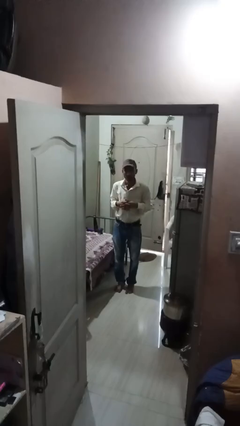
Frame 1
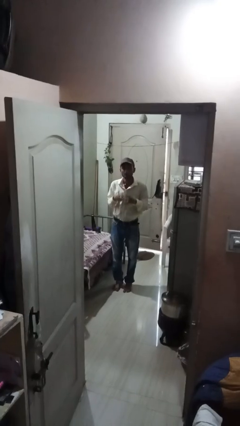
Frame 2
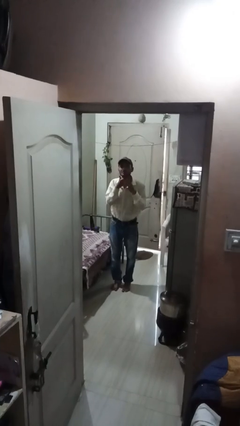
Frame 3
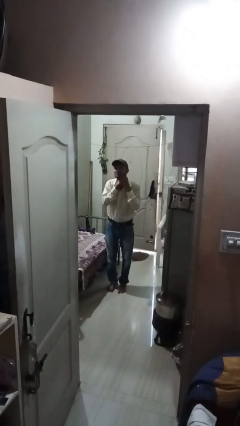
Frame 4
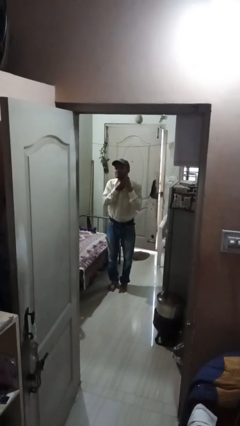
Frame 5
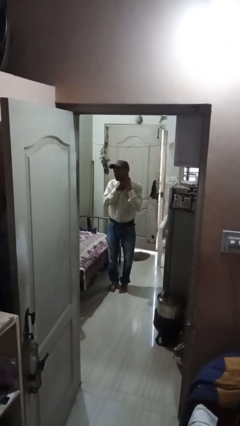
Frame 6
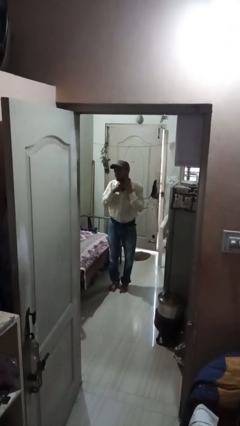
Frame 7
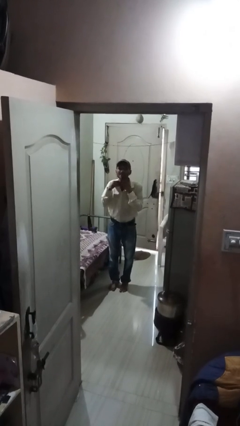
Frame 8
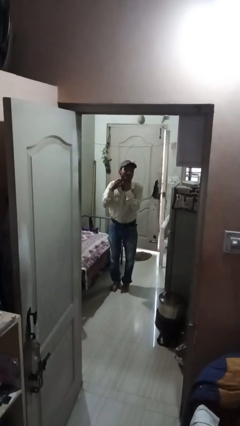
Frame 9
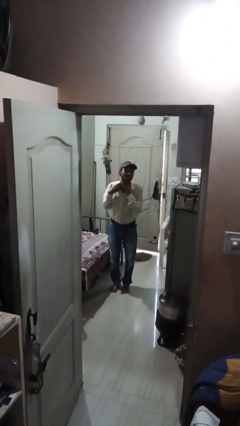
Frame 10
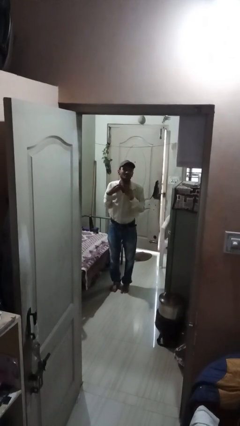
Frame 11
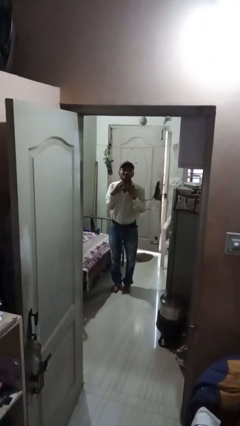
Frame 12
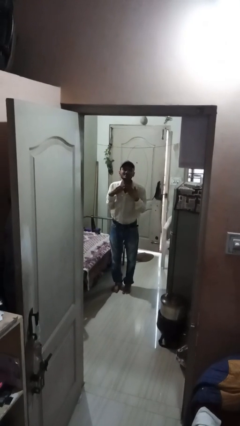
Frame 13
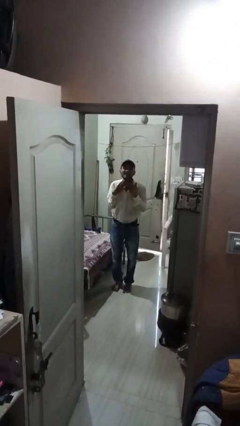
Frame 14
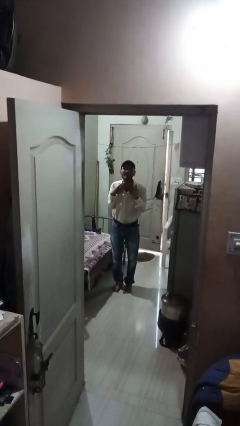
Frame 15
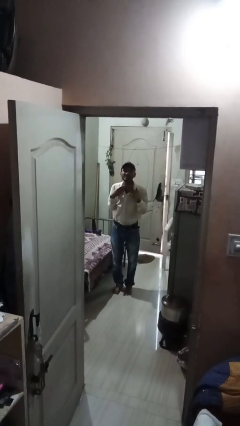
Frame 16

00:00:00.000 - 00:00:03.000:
person rubs neck

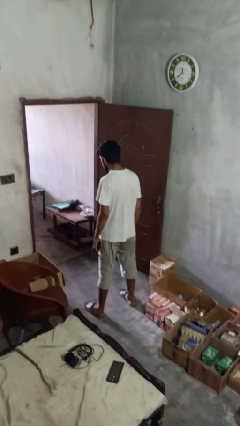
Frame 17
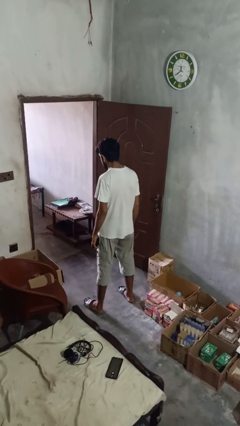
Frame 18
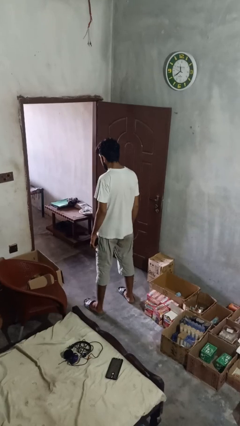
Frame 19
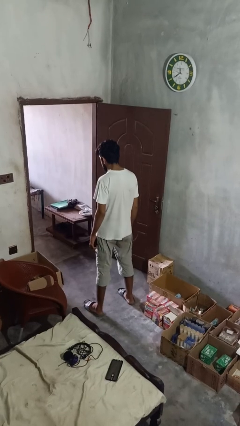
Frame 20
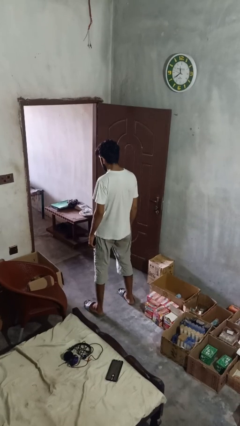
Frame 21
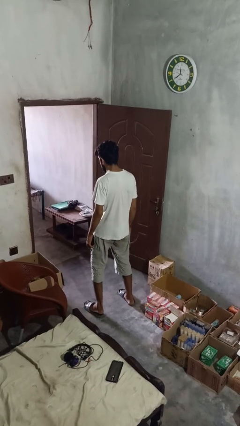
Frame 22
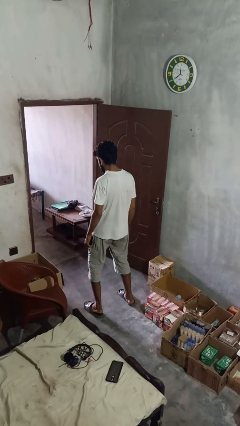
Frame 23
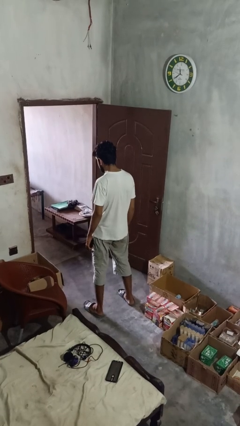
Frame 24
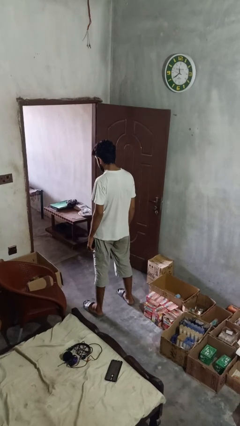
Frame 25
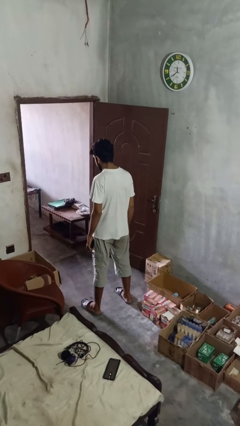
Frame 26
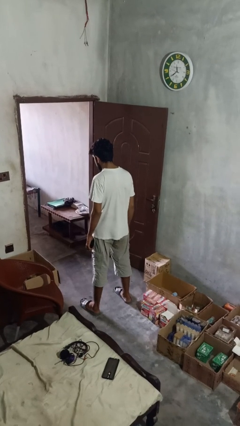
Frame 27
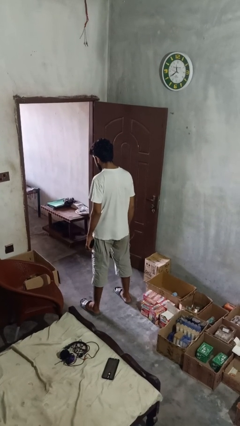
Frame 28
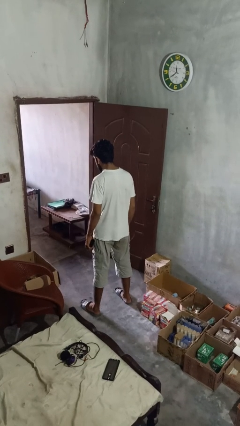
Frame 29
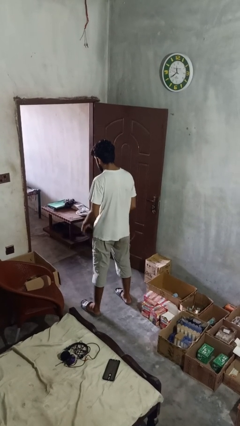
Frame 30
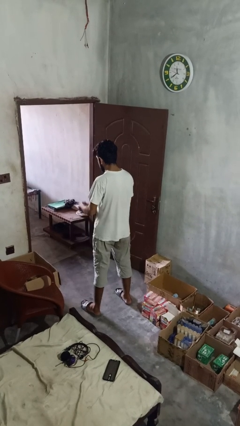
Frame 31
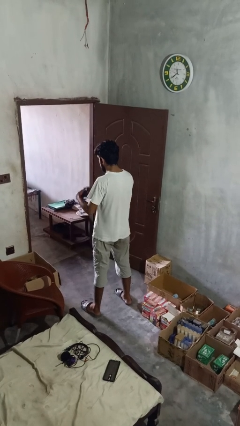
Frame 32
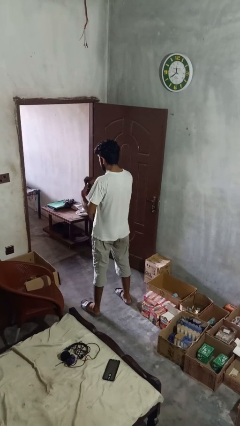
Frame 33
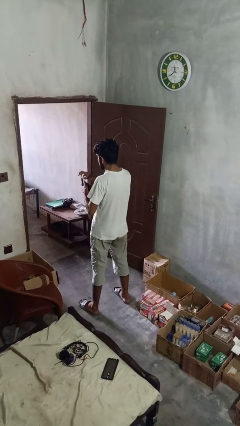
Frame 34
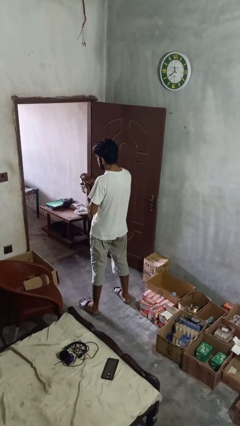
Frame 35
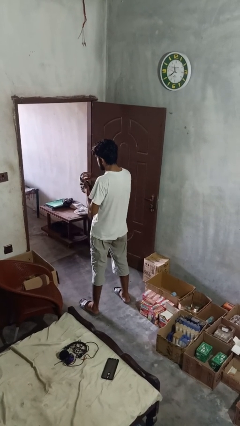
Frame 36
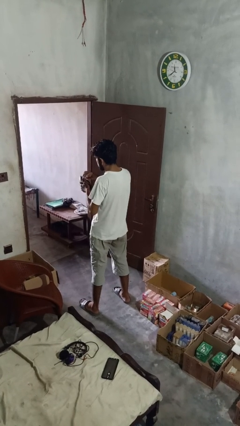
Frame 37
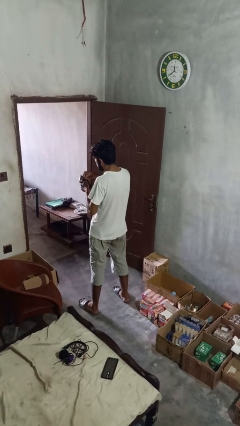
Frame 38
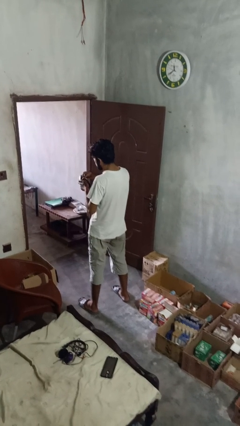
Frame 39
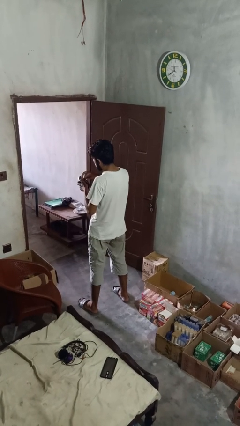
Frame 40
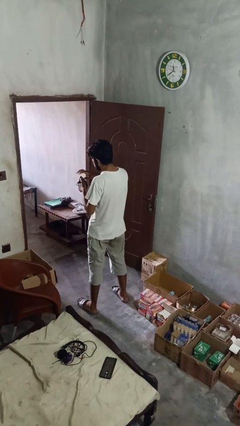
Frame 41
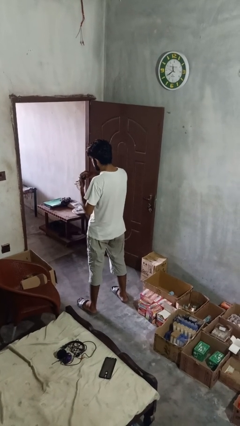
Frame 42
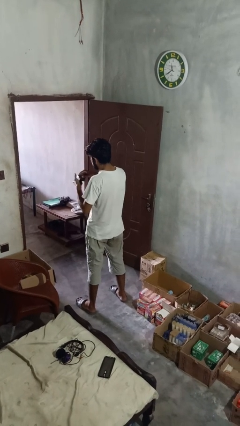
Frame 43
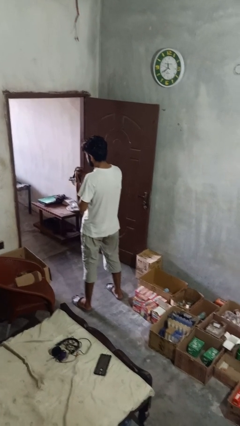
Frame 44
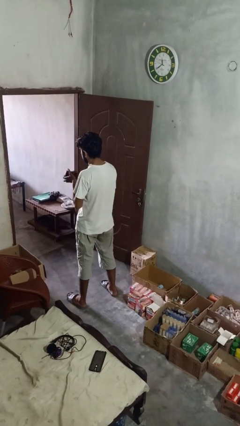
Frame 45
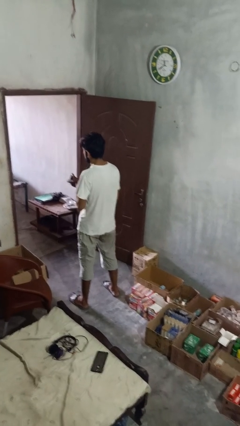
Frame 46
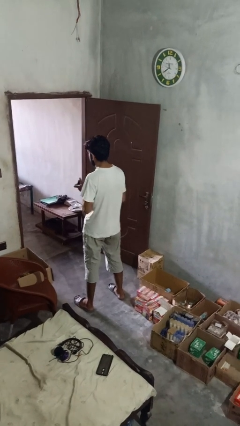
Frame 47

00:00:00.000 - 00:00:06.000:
person searches in purse

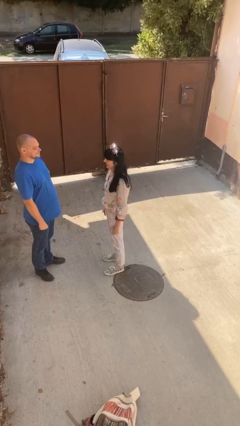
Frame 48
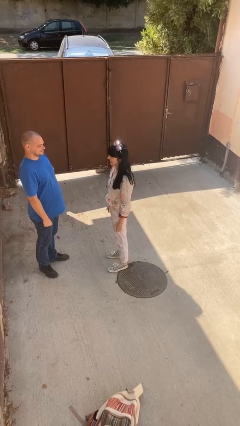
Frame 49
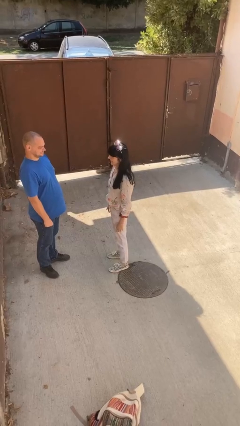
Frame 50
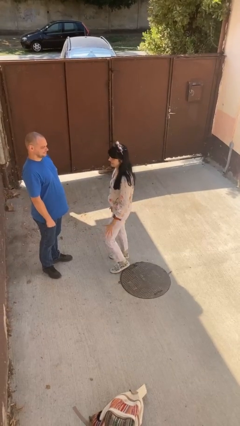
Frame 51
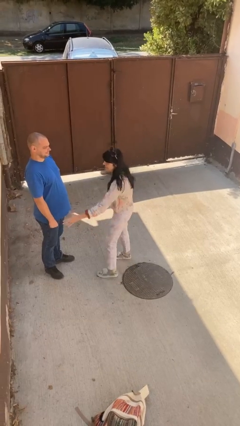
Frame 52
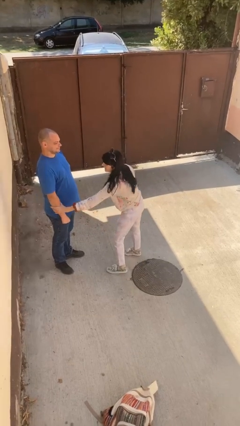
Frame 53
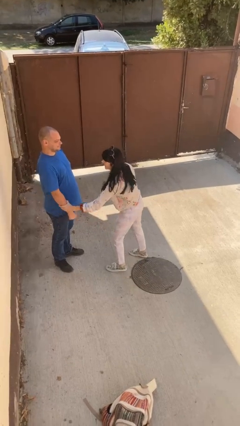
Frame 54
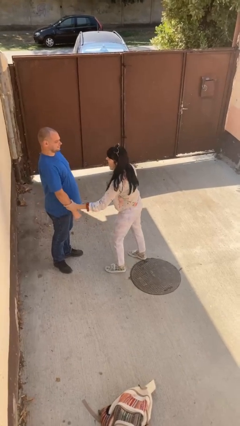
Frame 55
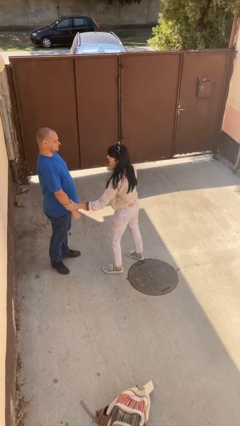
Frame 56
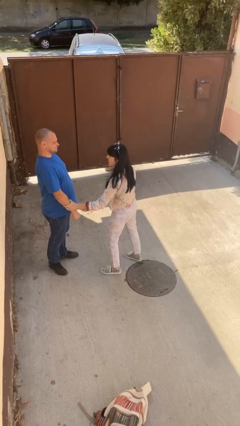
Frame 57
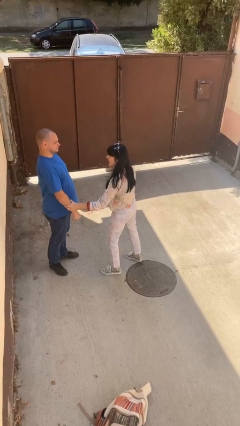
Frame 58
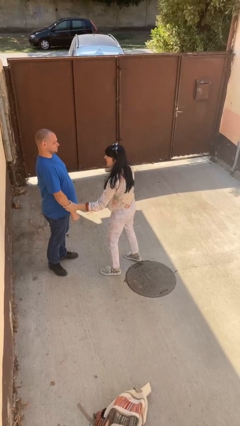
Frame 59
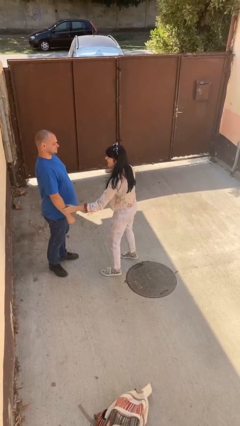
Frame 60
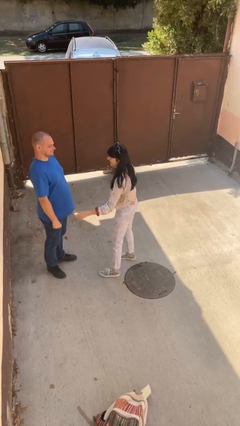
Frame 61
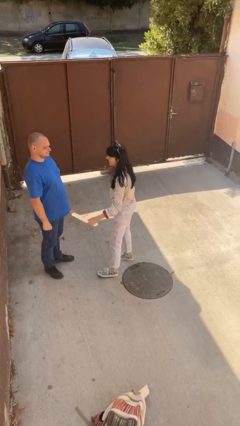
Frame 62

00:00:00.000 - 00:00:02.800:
person grabs person by forearm

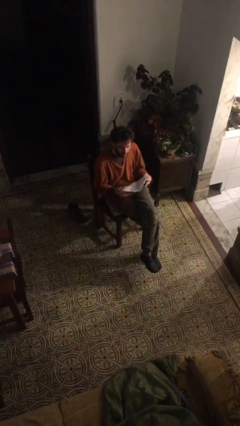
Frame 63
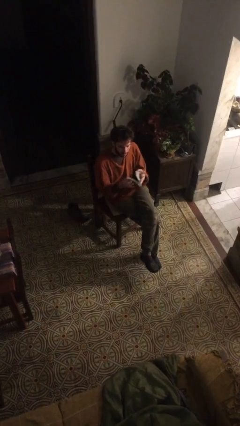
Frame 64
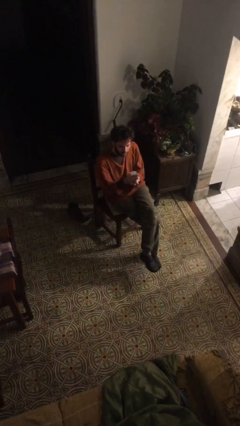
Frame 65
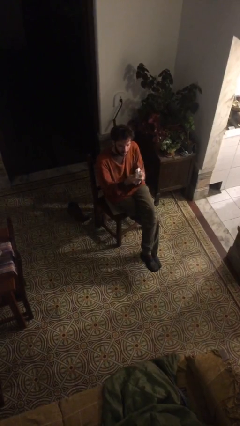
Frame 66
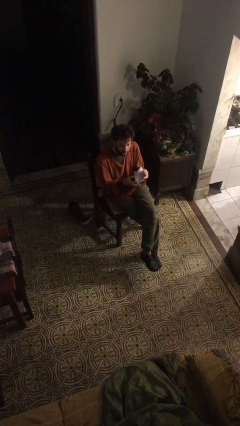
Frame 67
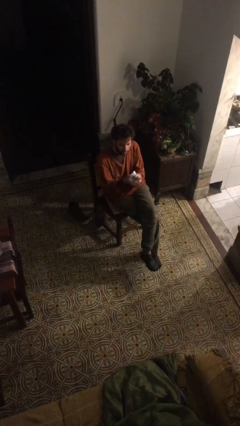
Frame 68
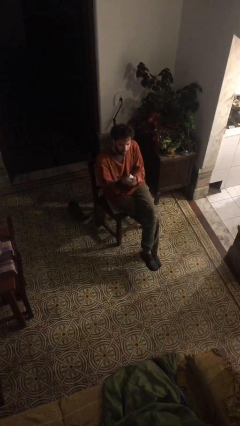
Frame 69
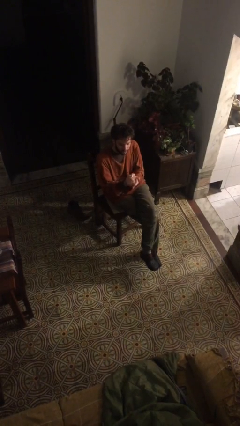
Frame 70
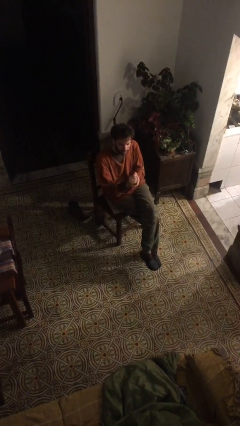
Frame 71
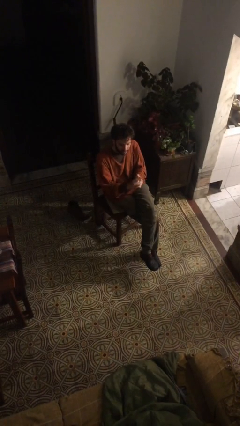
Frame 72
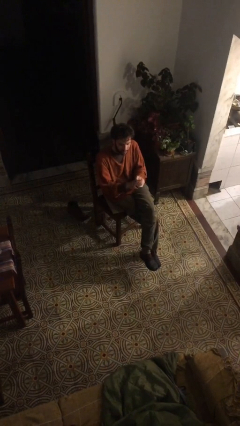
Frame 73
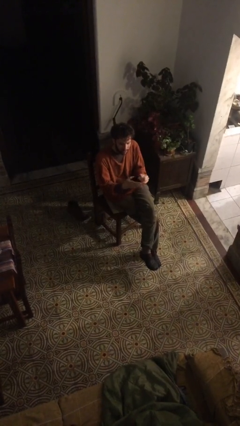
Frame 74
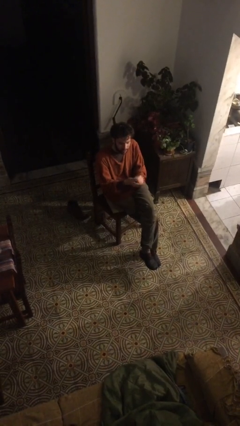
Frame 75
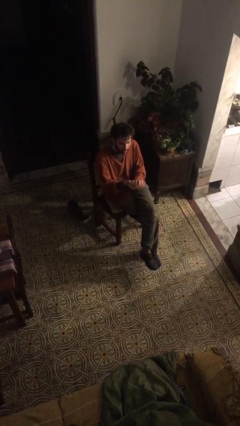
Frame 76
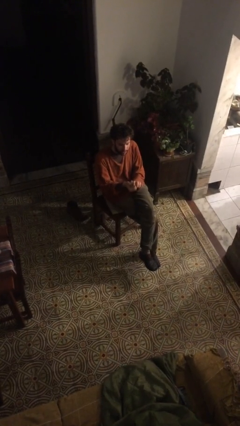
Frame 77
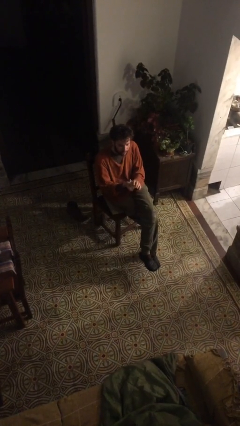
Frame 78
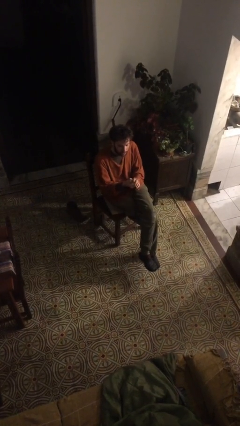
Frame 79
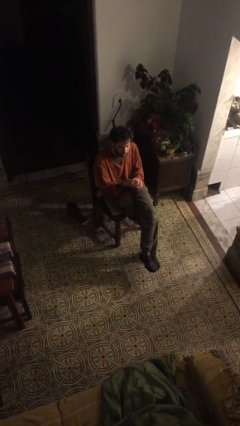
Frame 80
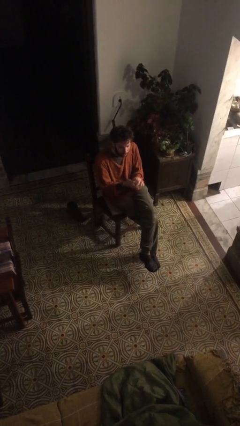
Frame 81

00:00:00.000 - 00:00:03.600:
person crumples paper

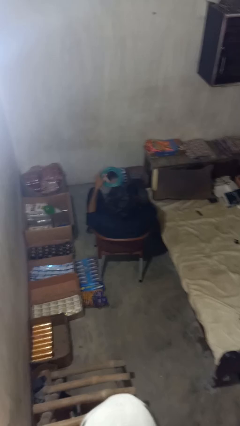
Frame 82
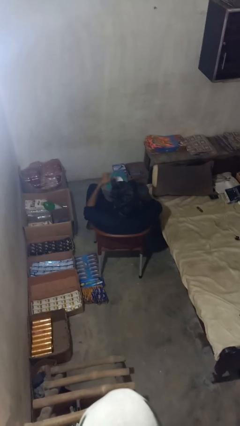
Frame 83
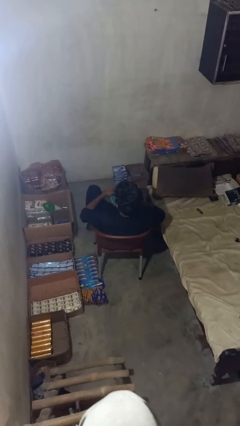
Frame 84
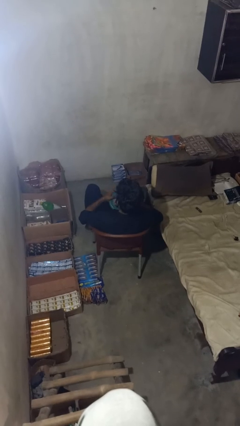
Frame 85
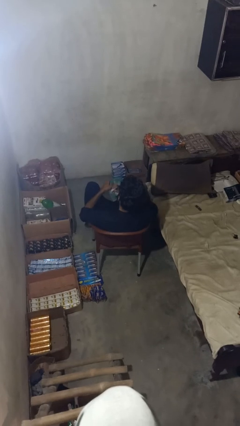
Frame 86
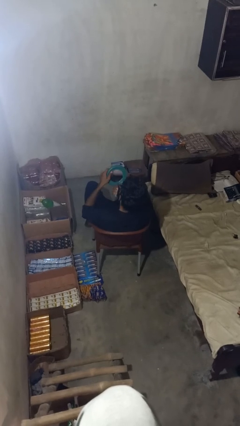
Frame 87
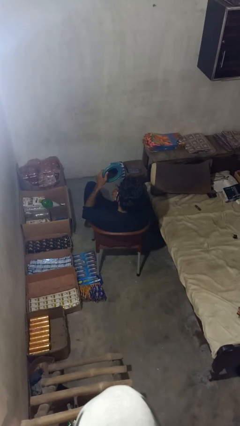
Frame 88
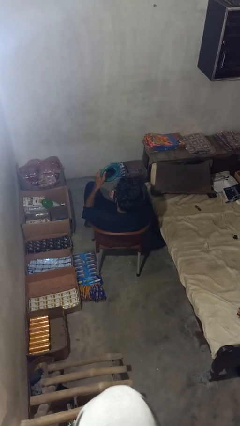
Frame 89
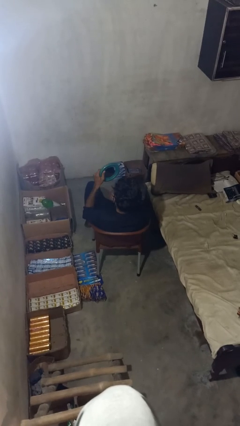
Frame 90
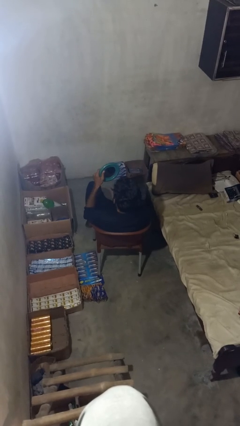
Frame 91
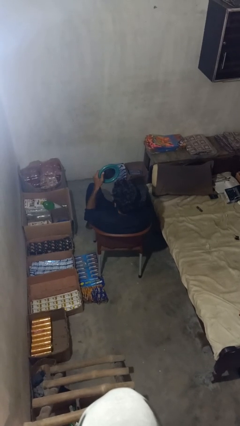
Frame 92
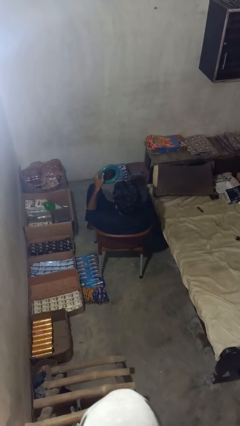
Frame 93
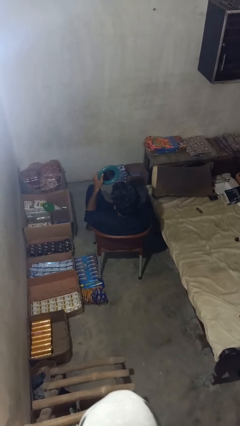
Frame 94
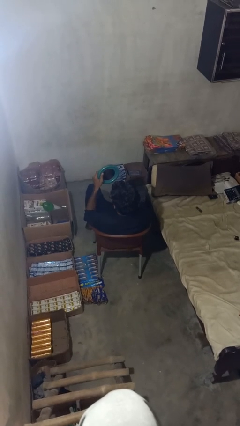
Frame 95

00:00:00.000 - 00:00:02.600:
person applies foundation makeup
